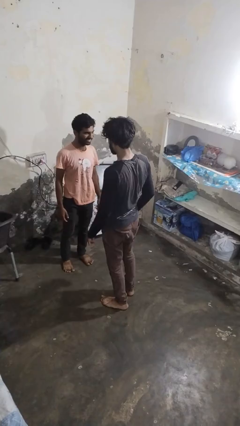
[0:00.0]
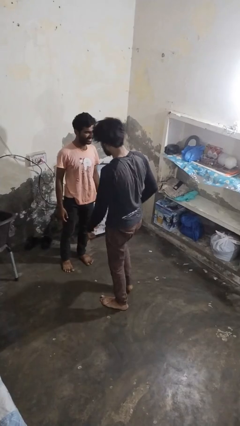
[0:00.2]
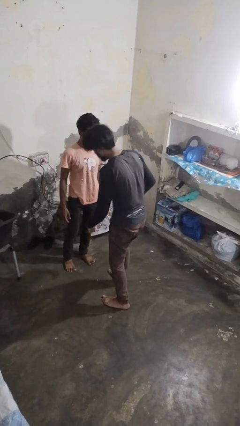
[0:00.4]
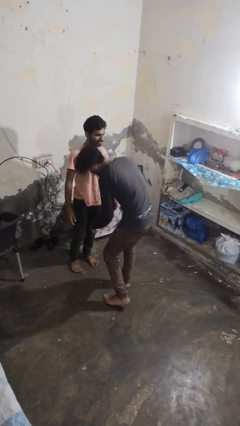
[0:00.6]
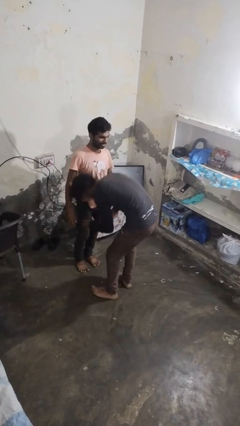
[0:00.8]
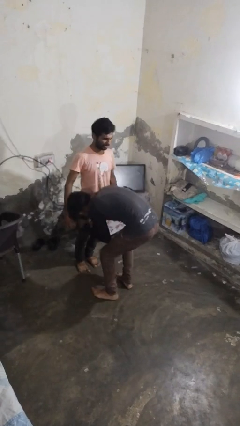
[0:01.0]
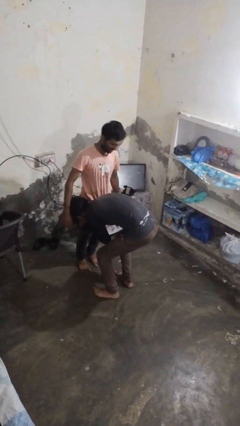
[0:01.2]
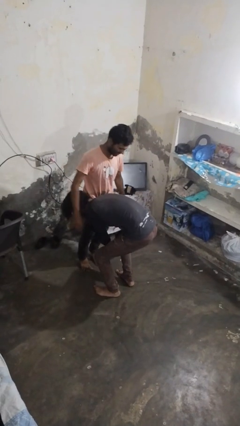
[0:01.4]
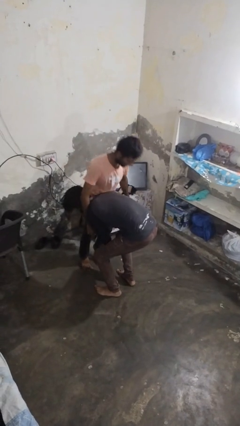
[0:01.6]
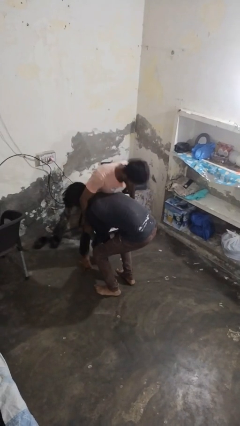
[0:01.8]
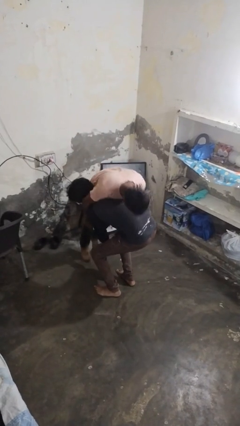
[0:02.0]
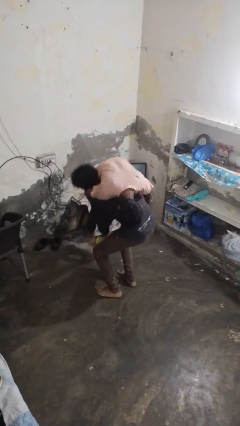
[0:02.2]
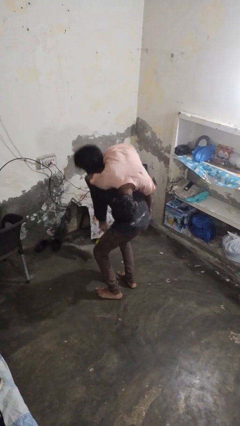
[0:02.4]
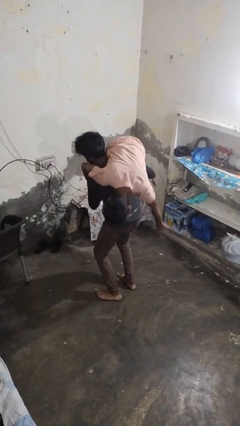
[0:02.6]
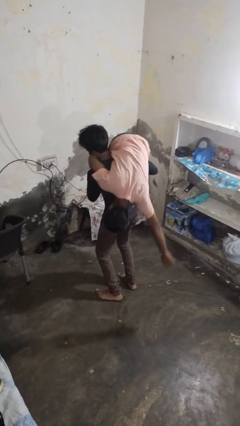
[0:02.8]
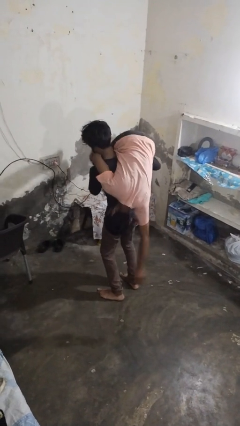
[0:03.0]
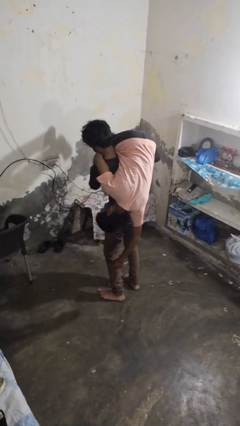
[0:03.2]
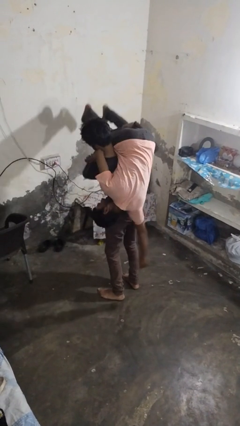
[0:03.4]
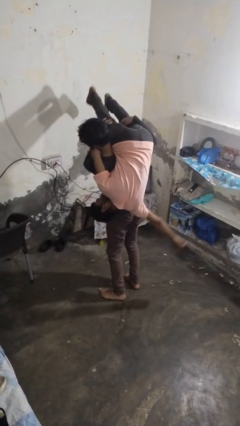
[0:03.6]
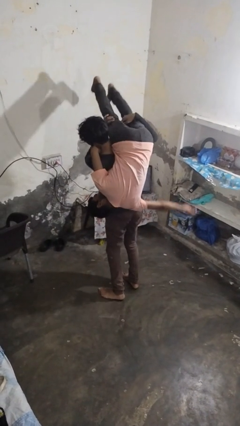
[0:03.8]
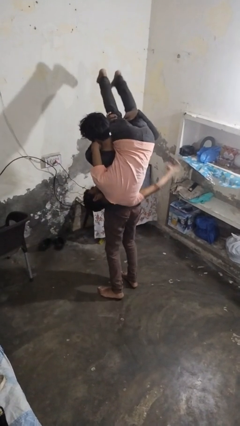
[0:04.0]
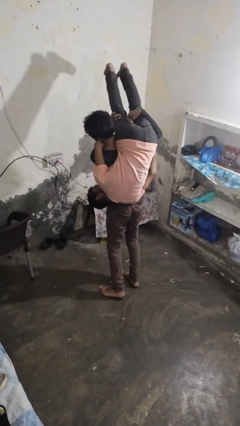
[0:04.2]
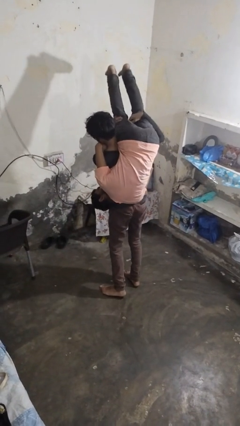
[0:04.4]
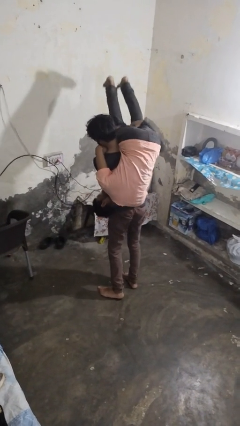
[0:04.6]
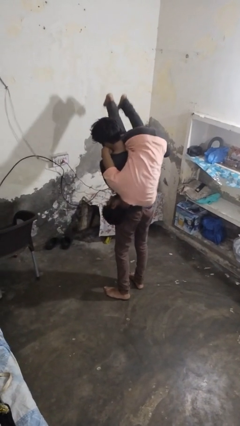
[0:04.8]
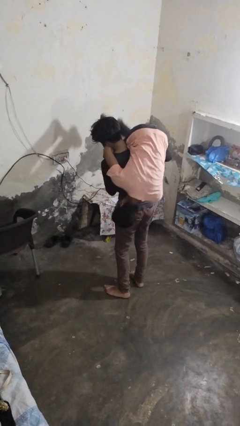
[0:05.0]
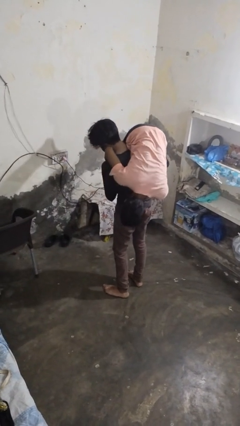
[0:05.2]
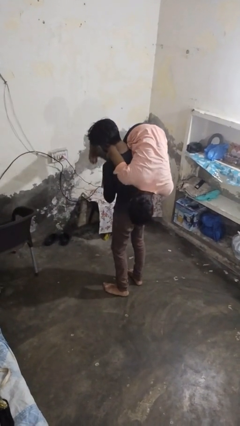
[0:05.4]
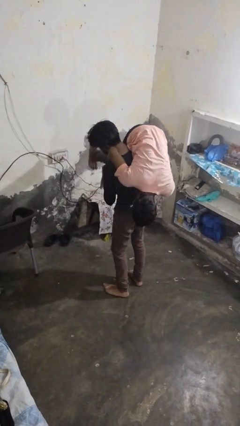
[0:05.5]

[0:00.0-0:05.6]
person carries person over shoulder

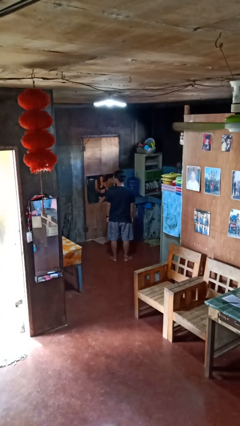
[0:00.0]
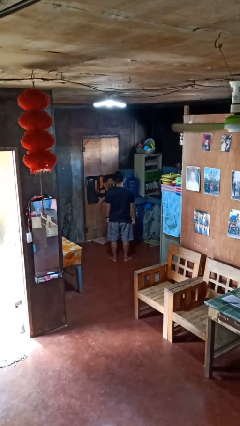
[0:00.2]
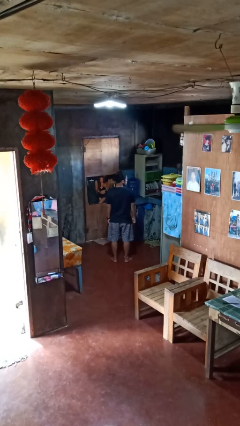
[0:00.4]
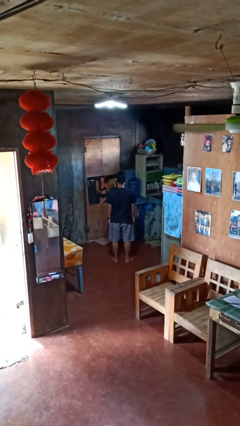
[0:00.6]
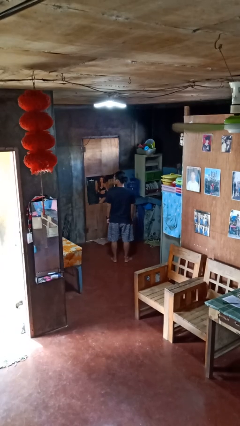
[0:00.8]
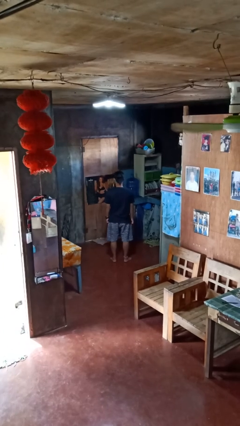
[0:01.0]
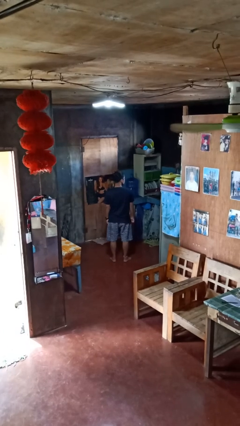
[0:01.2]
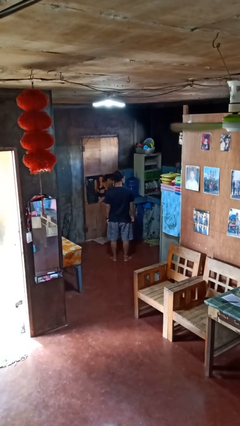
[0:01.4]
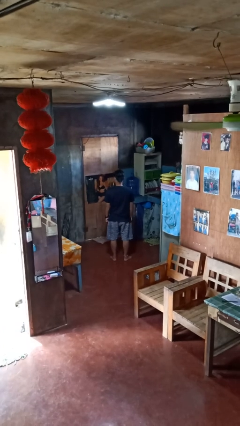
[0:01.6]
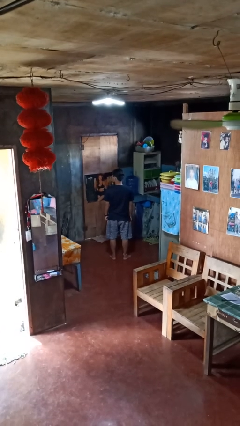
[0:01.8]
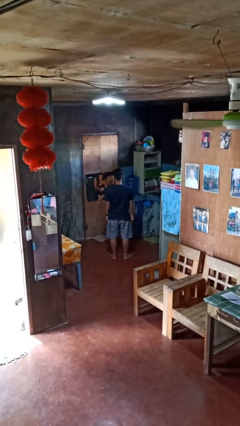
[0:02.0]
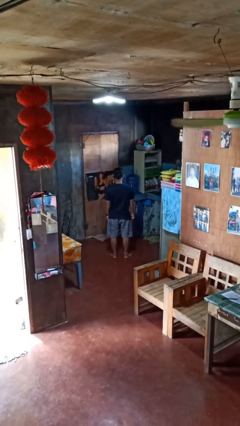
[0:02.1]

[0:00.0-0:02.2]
person shakes head

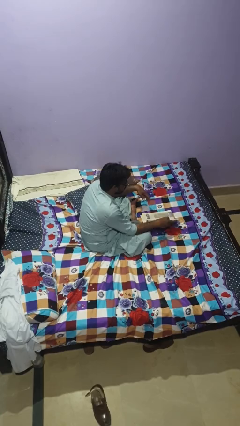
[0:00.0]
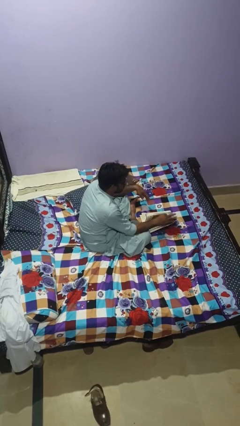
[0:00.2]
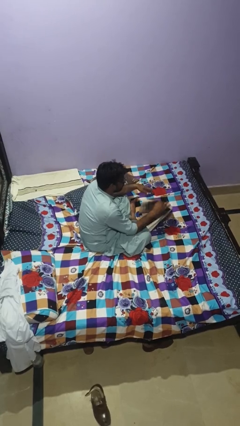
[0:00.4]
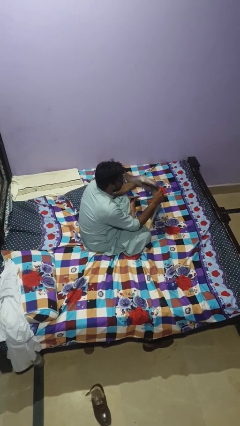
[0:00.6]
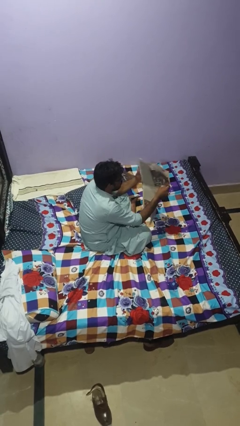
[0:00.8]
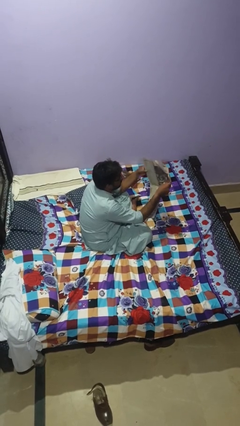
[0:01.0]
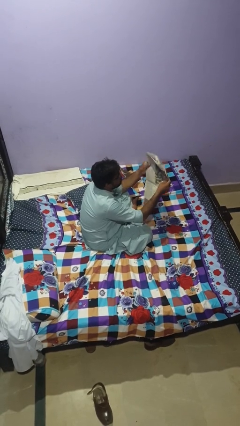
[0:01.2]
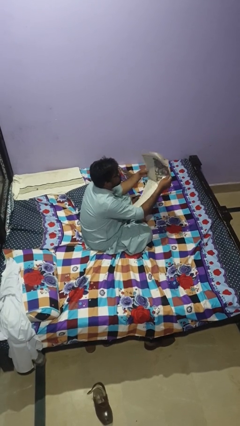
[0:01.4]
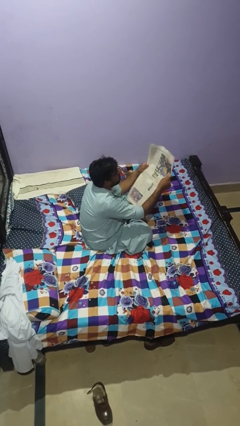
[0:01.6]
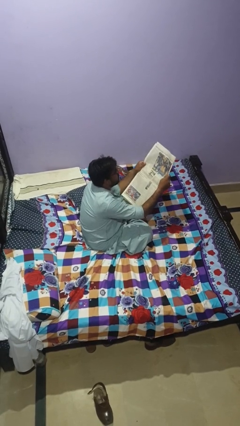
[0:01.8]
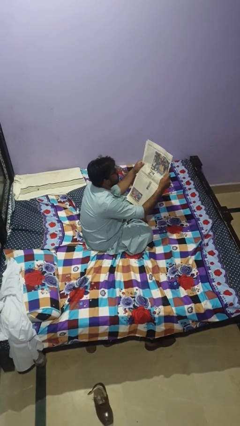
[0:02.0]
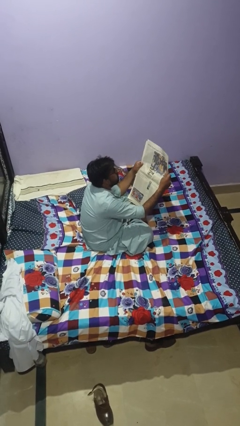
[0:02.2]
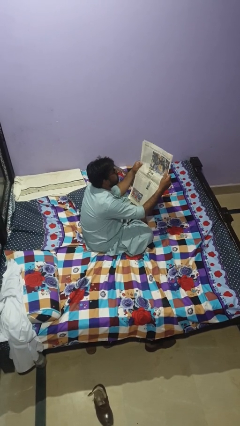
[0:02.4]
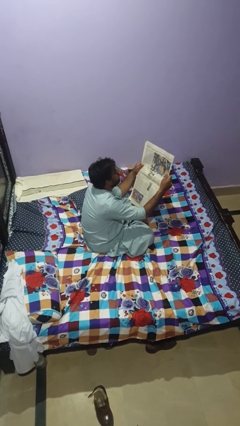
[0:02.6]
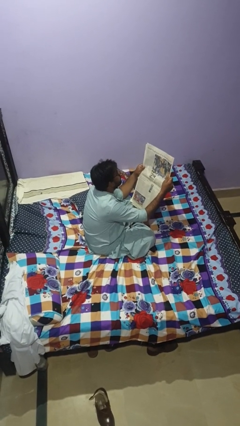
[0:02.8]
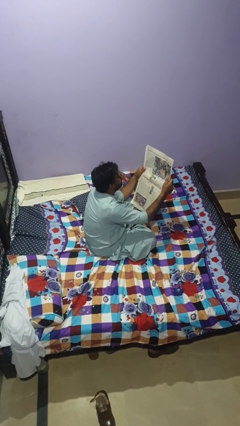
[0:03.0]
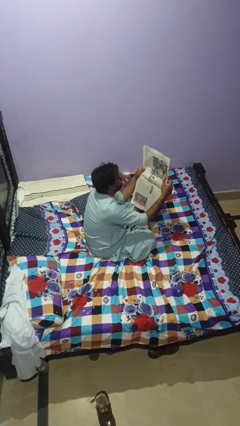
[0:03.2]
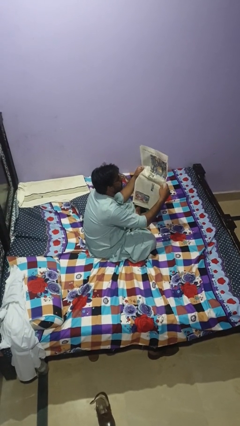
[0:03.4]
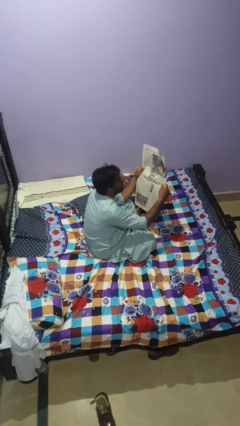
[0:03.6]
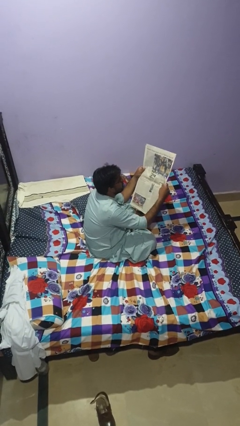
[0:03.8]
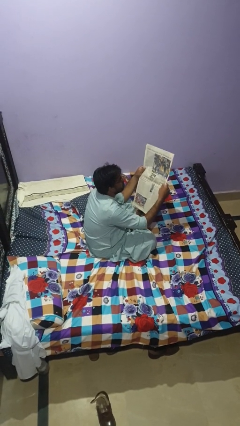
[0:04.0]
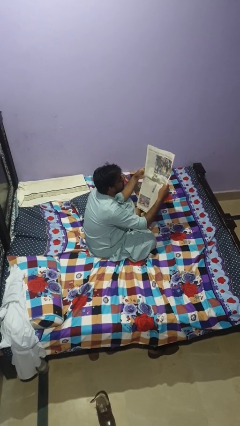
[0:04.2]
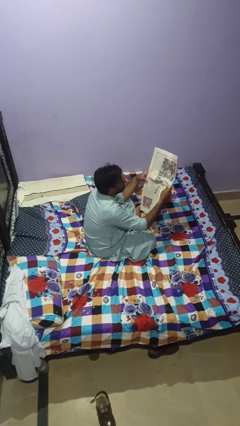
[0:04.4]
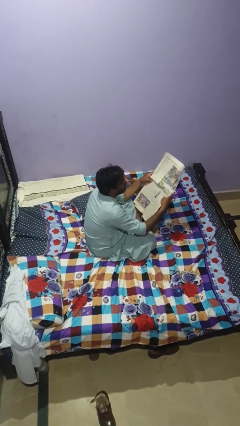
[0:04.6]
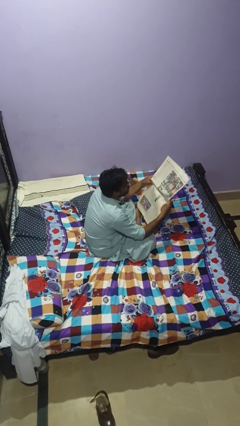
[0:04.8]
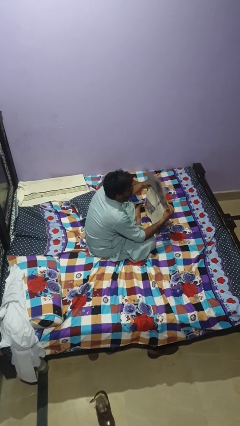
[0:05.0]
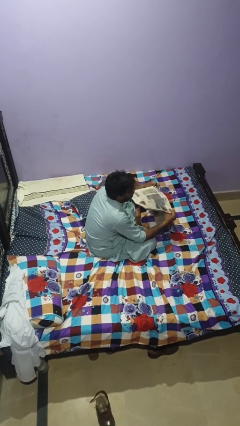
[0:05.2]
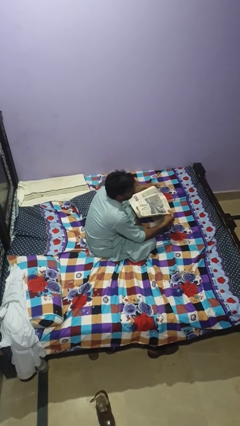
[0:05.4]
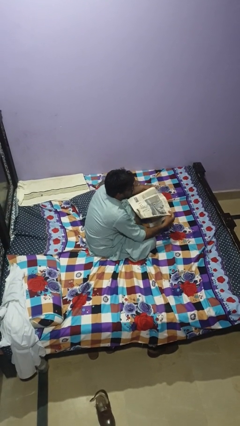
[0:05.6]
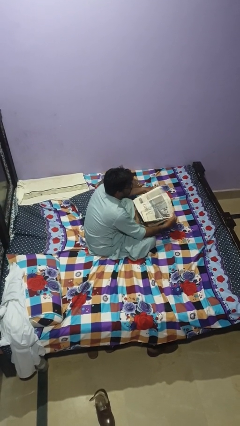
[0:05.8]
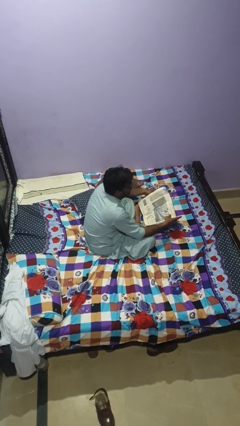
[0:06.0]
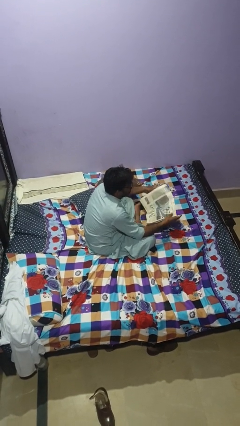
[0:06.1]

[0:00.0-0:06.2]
person reads newspaper

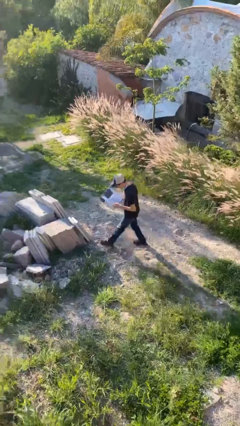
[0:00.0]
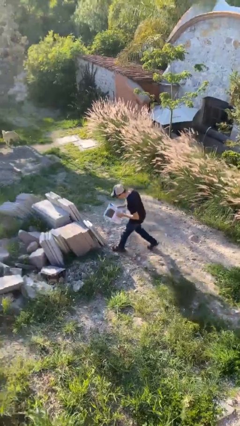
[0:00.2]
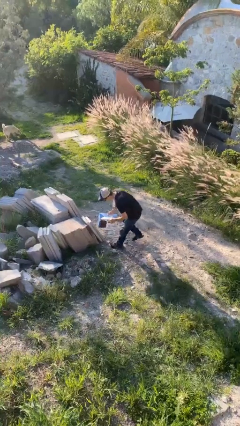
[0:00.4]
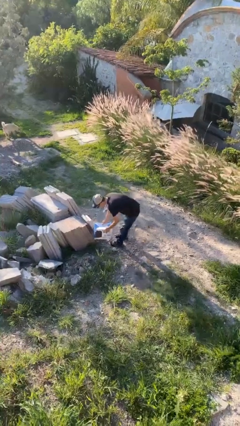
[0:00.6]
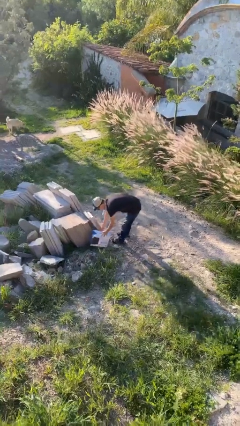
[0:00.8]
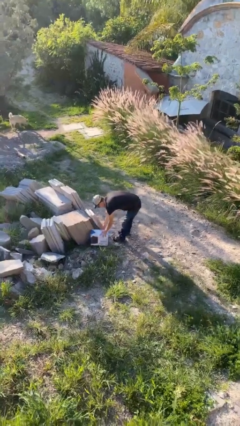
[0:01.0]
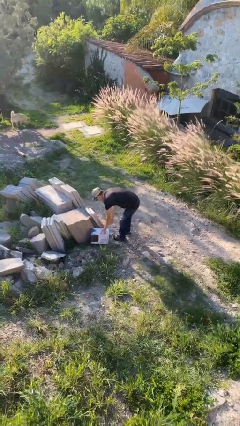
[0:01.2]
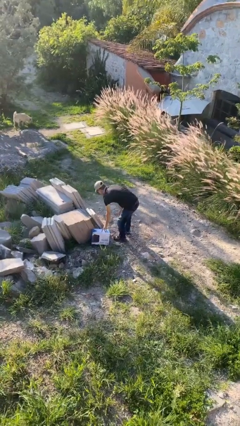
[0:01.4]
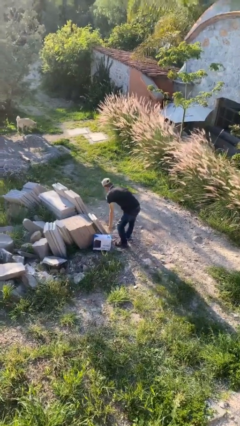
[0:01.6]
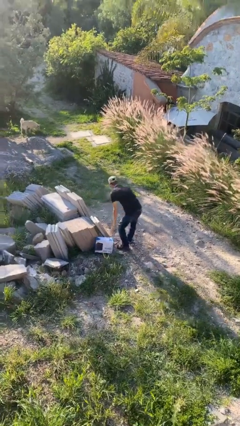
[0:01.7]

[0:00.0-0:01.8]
person puts down object on floor

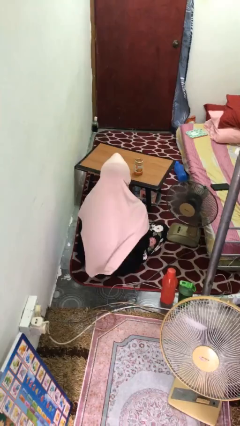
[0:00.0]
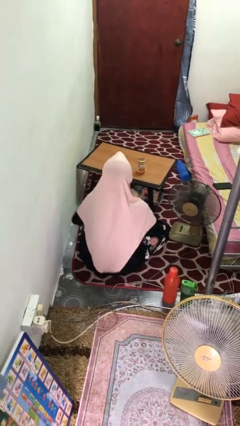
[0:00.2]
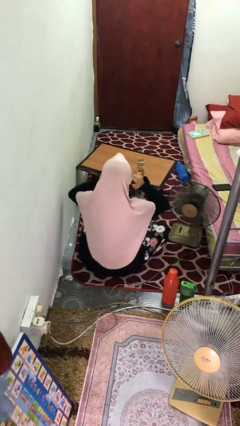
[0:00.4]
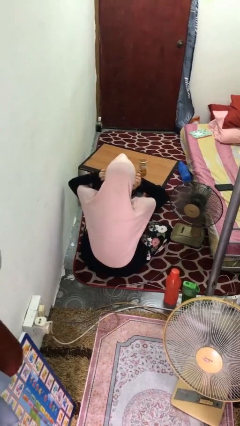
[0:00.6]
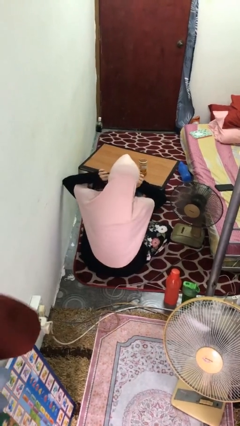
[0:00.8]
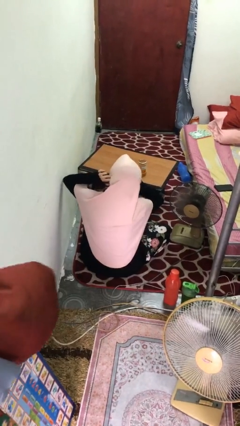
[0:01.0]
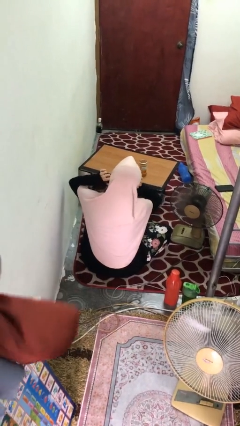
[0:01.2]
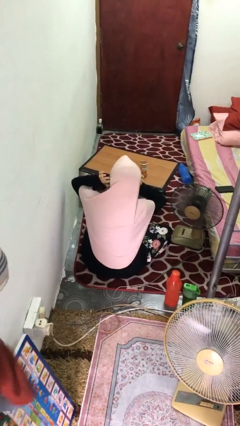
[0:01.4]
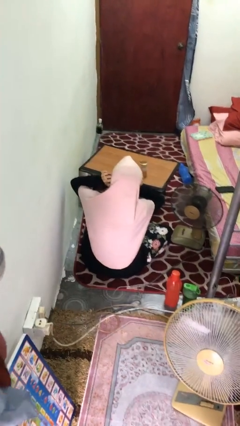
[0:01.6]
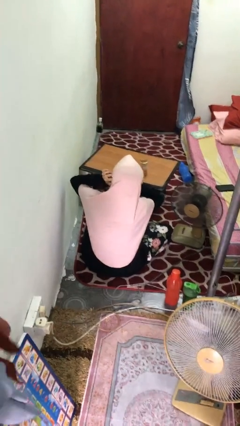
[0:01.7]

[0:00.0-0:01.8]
person puts fingers in ear
